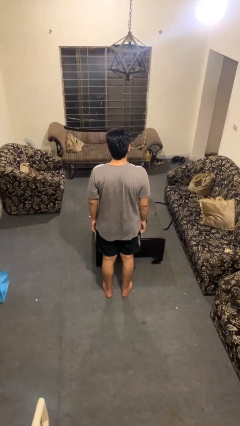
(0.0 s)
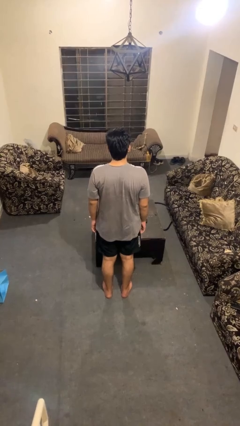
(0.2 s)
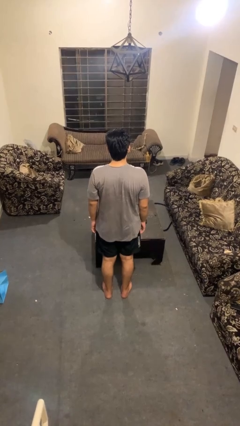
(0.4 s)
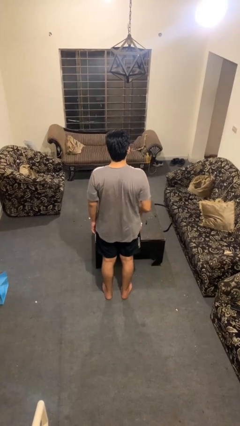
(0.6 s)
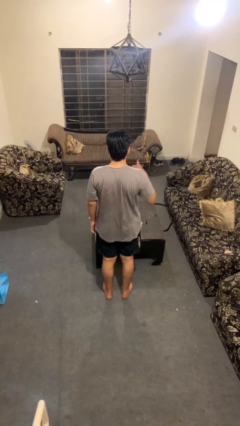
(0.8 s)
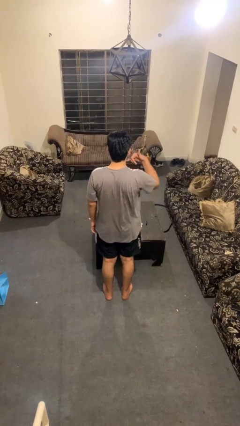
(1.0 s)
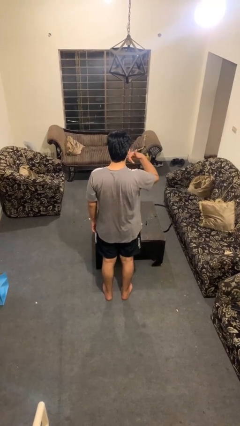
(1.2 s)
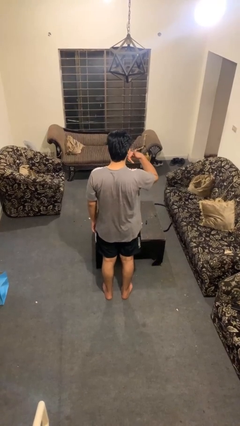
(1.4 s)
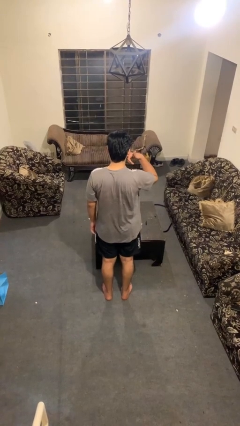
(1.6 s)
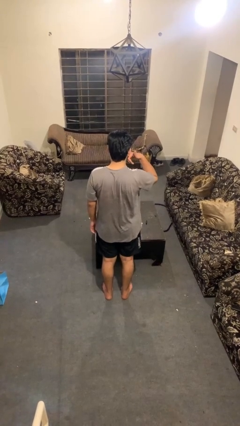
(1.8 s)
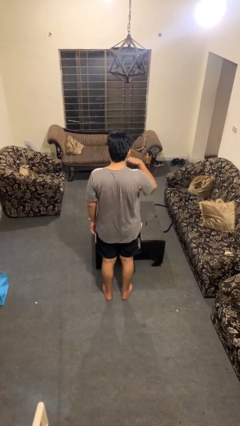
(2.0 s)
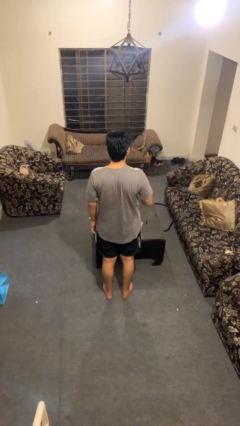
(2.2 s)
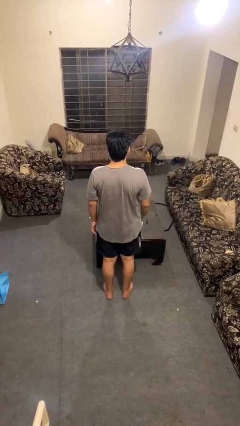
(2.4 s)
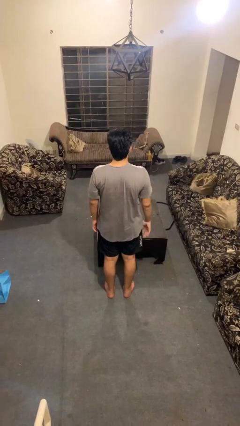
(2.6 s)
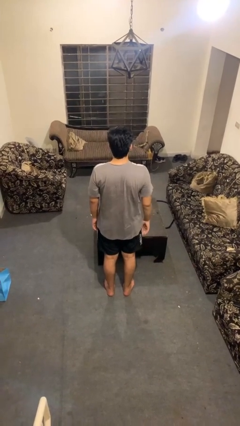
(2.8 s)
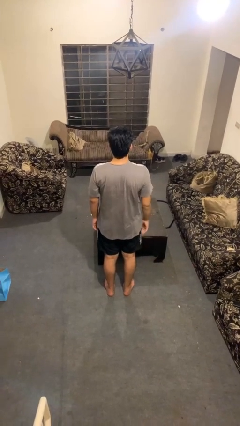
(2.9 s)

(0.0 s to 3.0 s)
person gestures call me

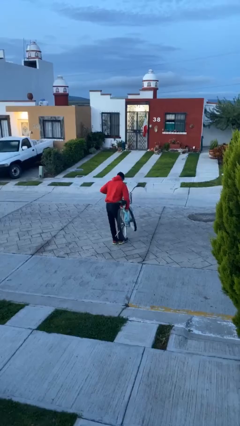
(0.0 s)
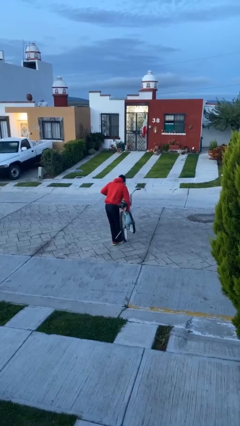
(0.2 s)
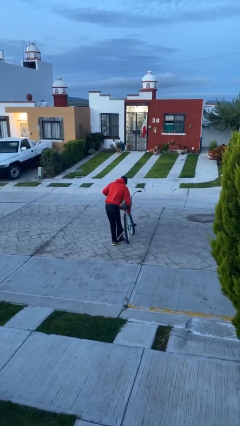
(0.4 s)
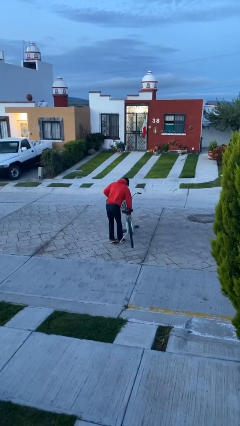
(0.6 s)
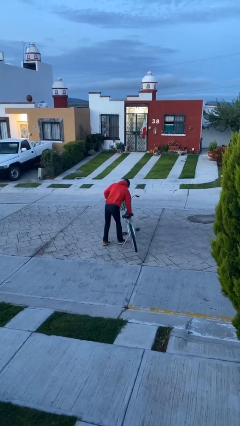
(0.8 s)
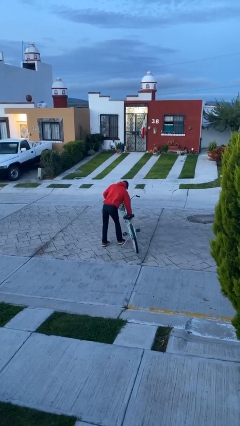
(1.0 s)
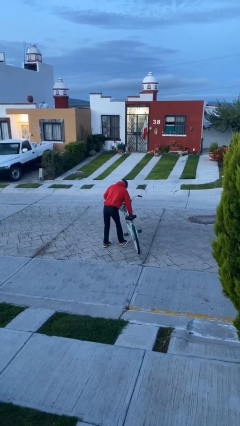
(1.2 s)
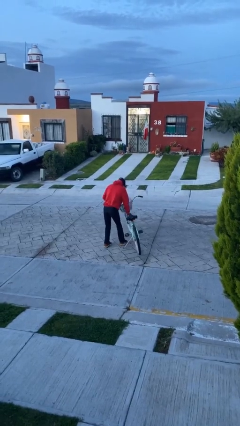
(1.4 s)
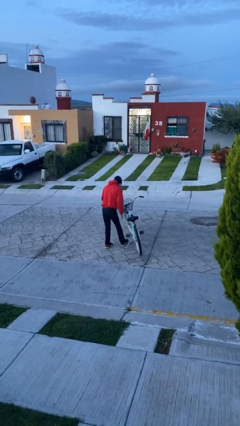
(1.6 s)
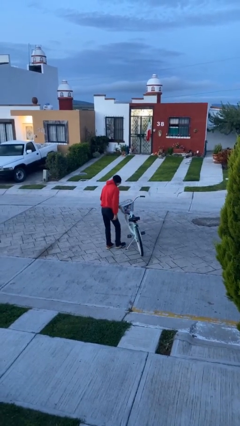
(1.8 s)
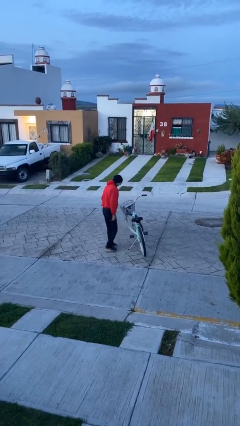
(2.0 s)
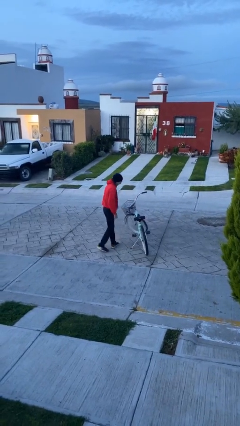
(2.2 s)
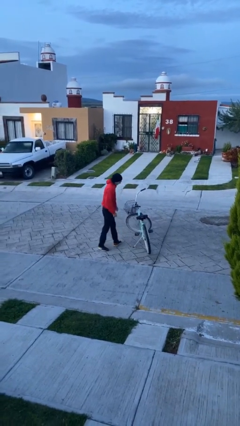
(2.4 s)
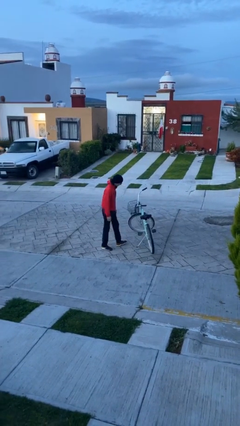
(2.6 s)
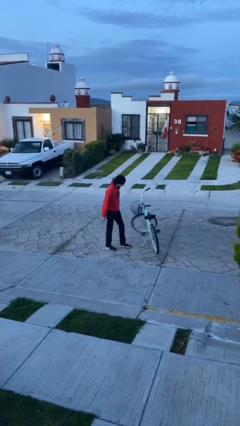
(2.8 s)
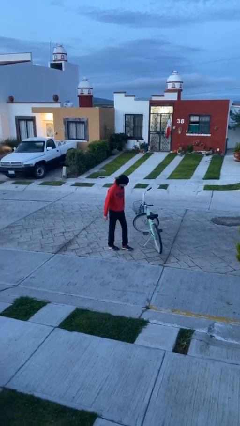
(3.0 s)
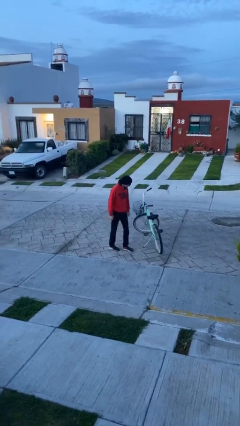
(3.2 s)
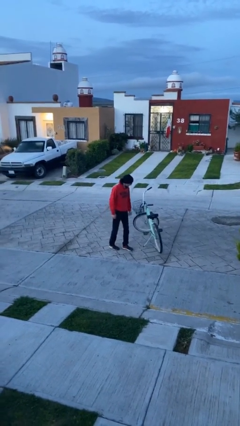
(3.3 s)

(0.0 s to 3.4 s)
person puts down object on floor

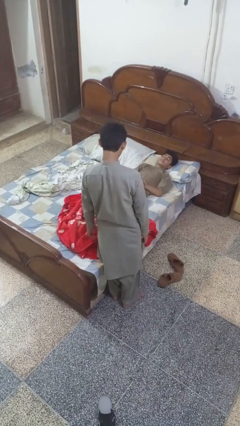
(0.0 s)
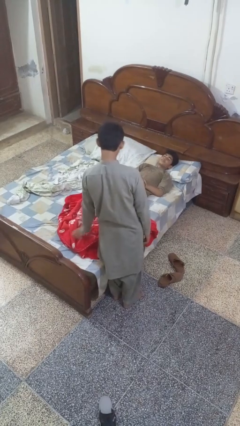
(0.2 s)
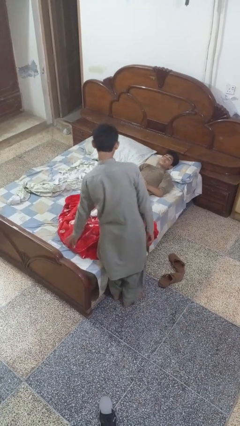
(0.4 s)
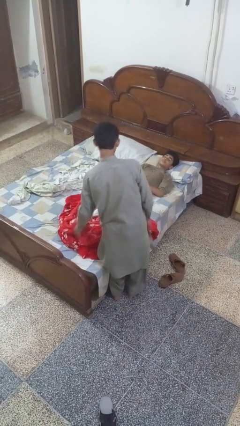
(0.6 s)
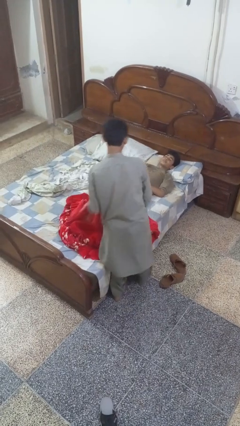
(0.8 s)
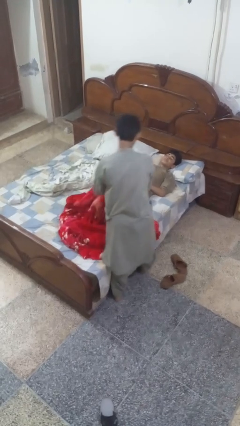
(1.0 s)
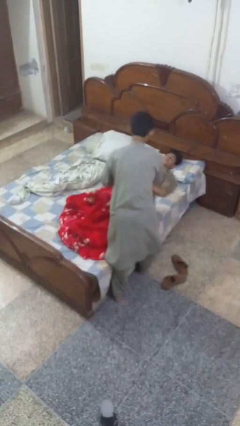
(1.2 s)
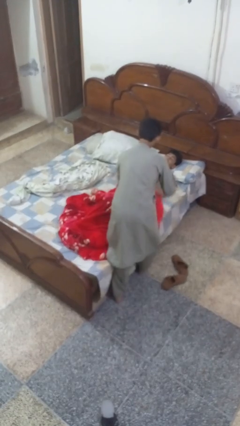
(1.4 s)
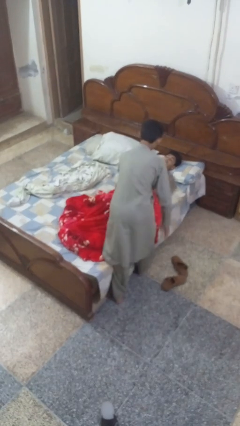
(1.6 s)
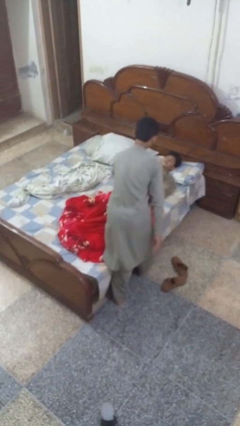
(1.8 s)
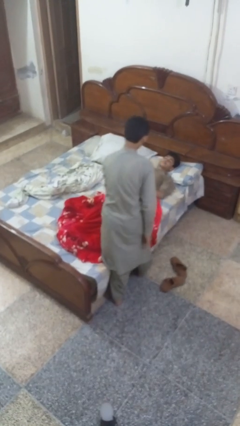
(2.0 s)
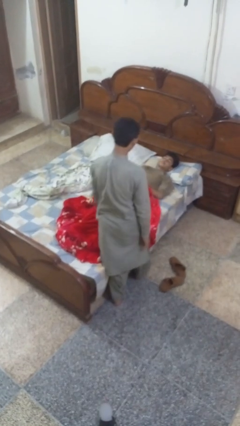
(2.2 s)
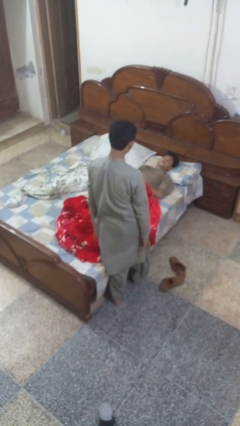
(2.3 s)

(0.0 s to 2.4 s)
person covers friend with blanket

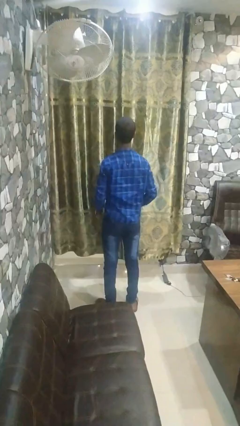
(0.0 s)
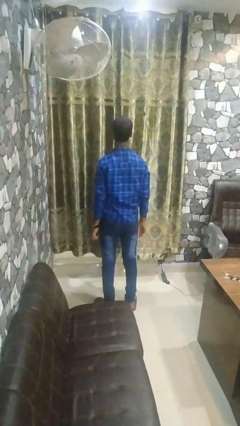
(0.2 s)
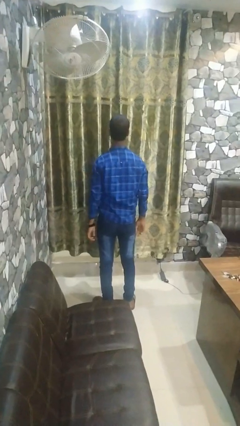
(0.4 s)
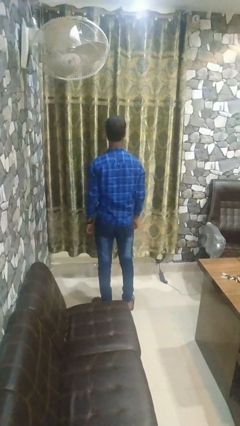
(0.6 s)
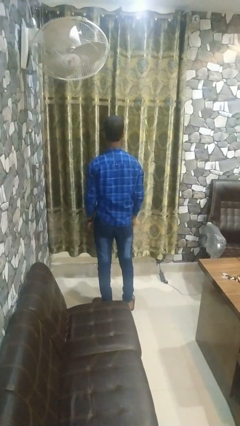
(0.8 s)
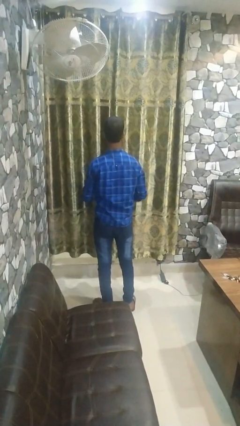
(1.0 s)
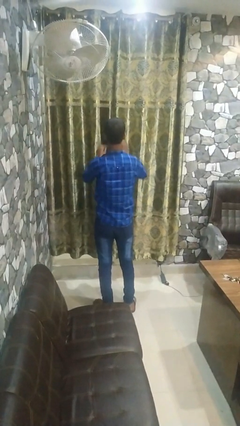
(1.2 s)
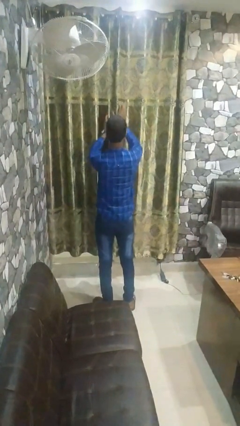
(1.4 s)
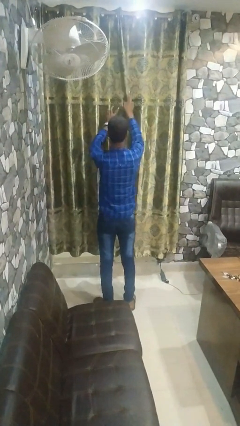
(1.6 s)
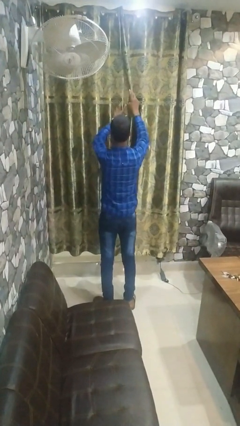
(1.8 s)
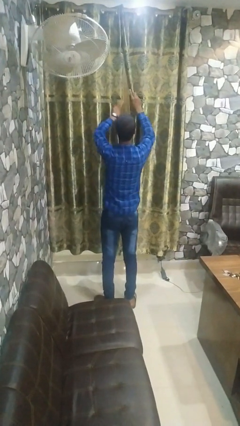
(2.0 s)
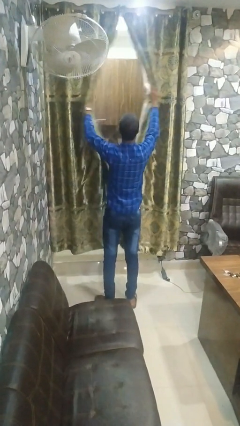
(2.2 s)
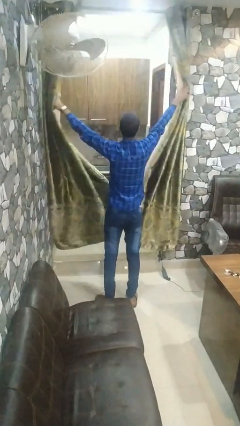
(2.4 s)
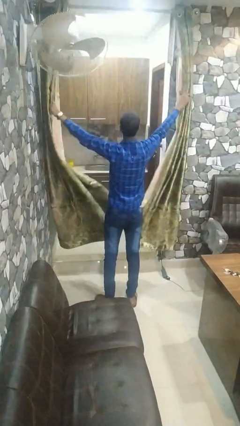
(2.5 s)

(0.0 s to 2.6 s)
person opens curtains

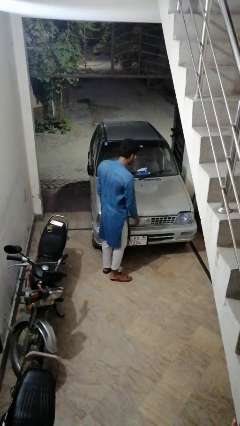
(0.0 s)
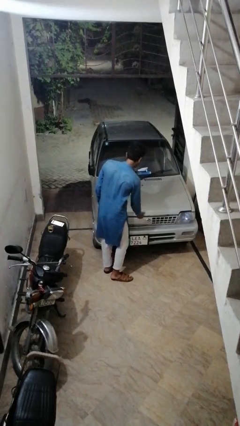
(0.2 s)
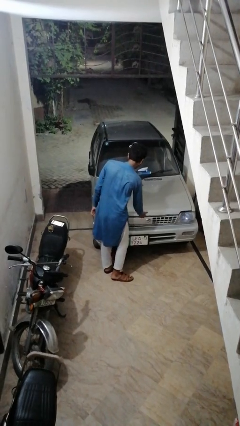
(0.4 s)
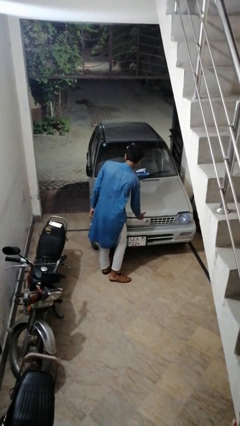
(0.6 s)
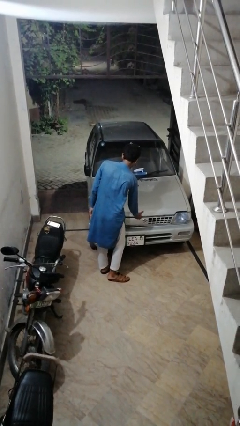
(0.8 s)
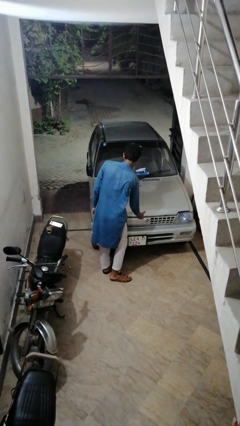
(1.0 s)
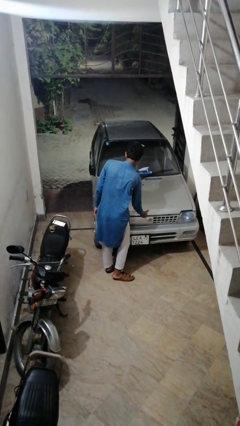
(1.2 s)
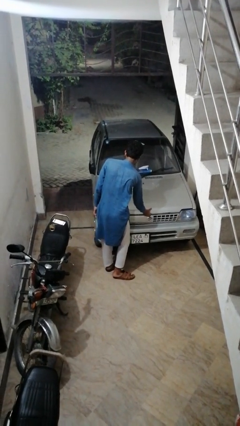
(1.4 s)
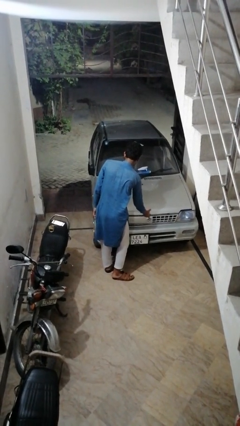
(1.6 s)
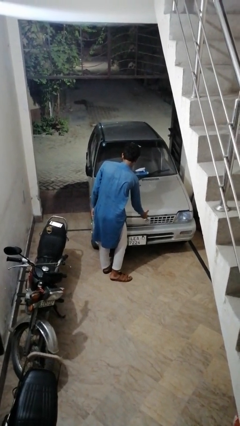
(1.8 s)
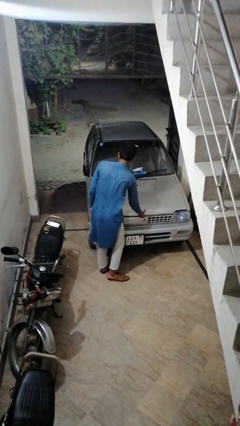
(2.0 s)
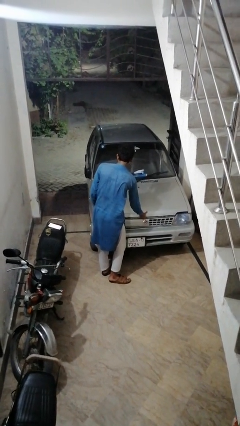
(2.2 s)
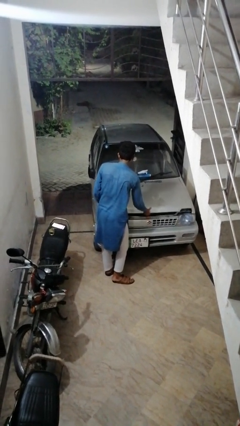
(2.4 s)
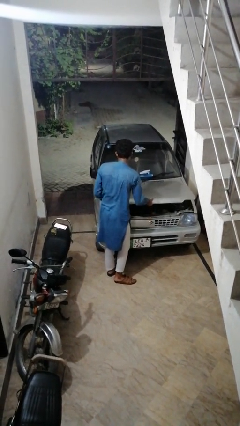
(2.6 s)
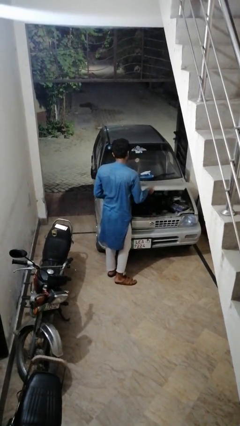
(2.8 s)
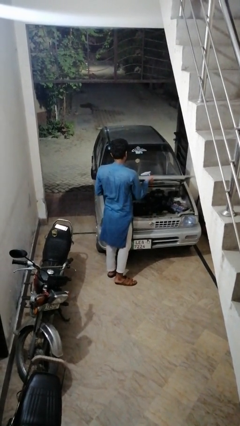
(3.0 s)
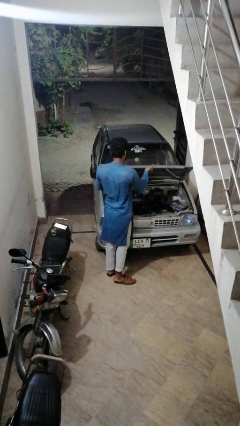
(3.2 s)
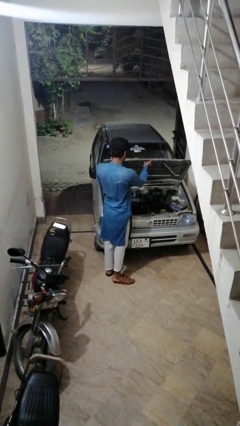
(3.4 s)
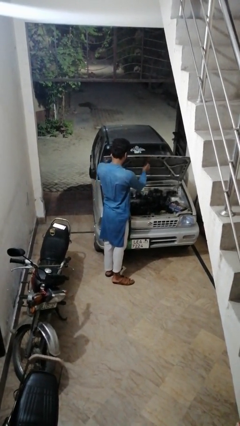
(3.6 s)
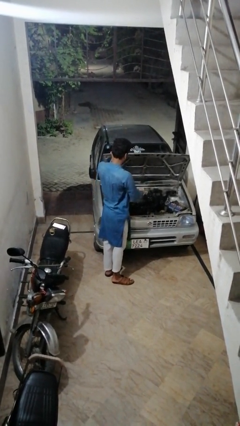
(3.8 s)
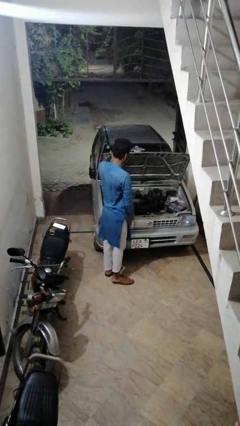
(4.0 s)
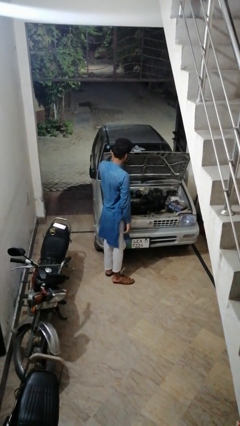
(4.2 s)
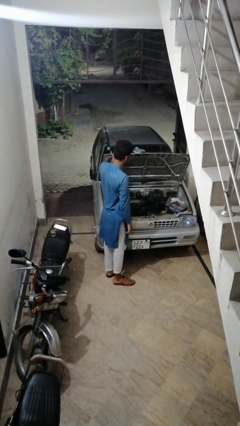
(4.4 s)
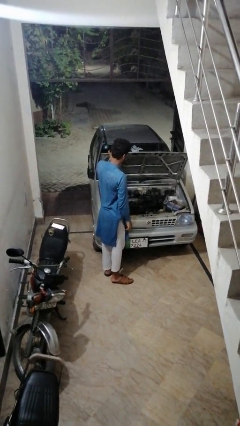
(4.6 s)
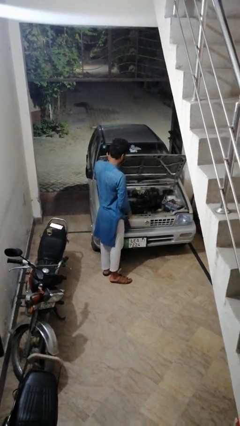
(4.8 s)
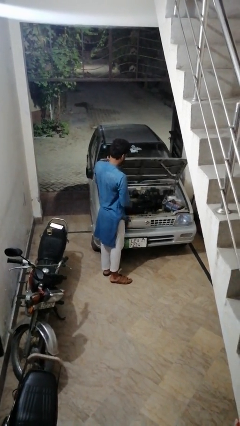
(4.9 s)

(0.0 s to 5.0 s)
person opens car hood

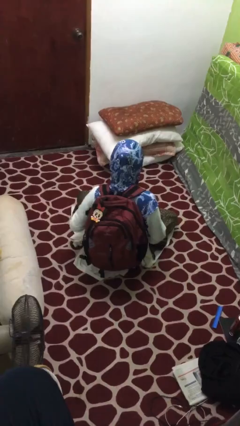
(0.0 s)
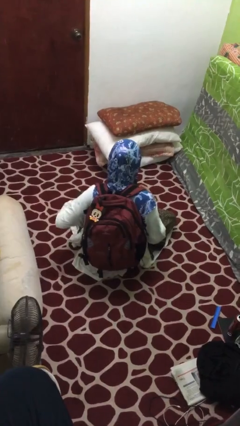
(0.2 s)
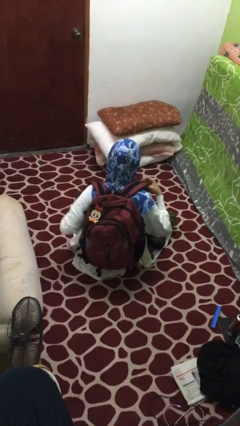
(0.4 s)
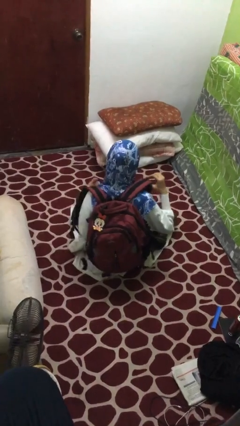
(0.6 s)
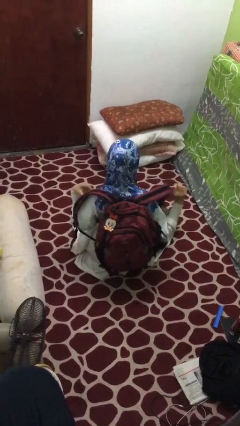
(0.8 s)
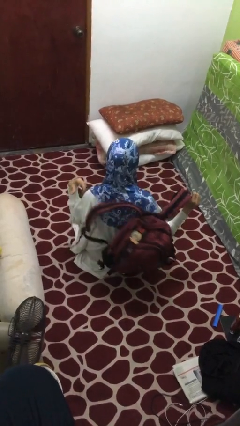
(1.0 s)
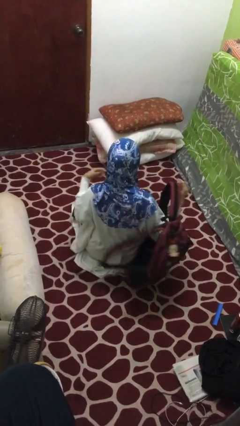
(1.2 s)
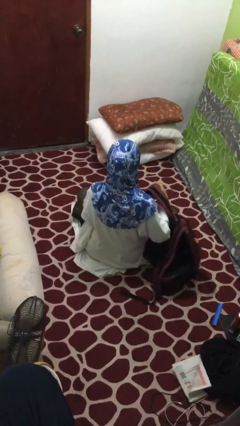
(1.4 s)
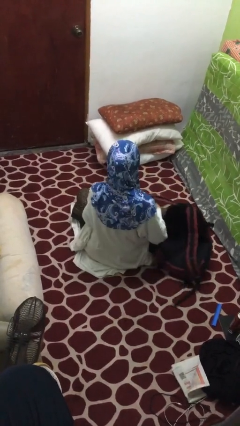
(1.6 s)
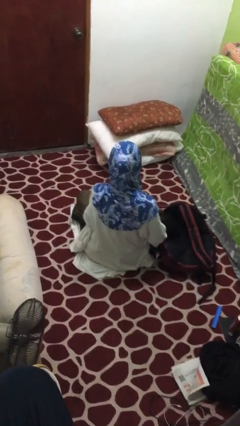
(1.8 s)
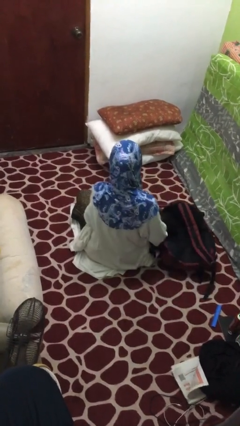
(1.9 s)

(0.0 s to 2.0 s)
person takes off backpack
